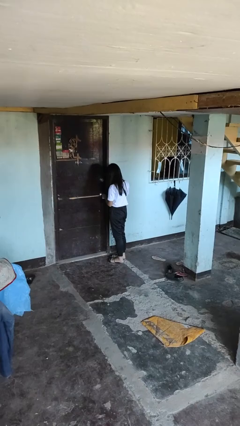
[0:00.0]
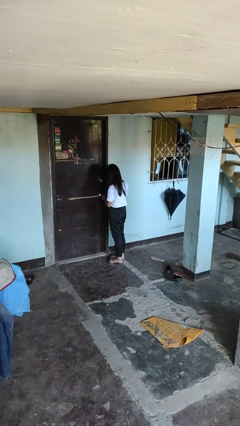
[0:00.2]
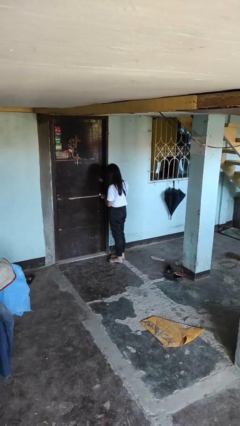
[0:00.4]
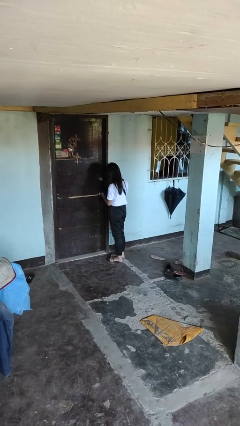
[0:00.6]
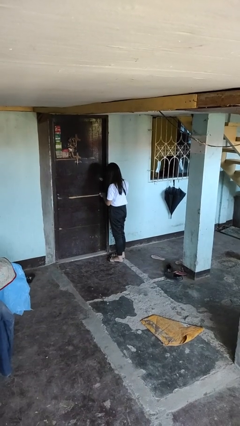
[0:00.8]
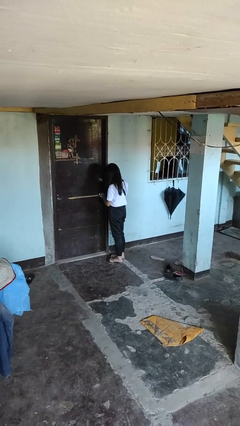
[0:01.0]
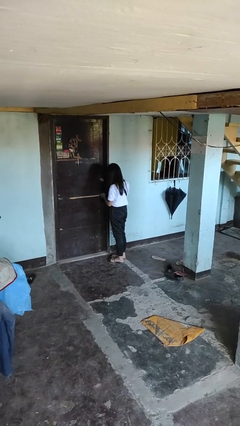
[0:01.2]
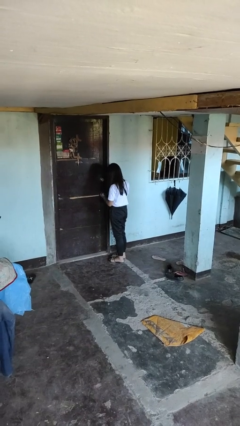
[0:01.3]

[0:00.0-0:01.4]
person locks door with keys

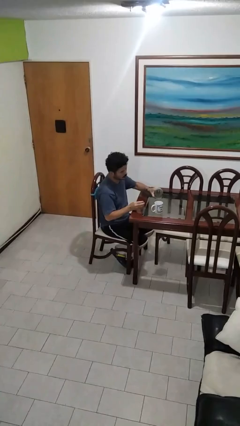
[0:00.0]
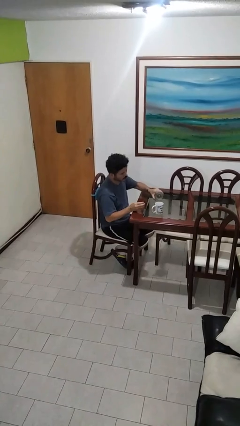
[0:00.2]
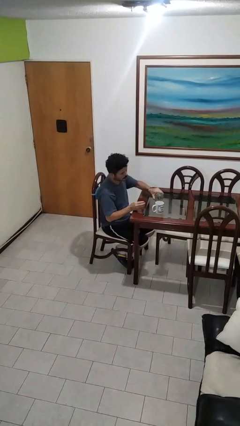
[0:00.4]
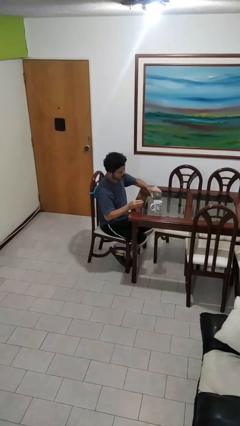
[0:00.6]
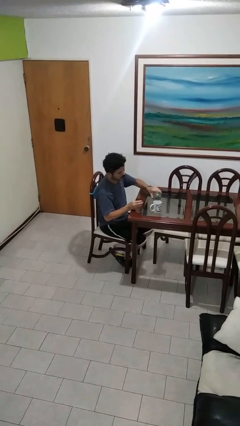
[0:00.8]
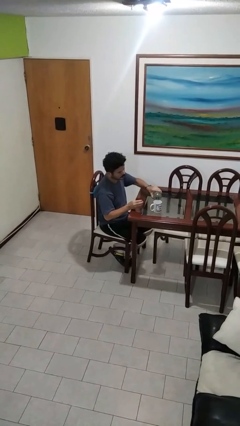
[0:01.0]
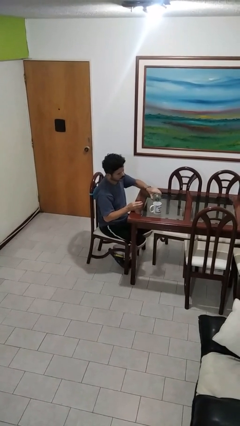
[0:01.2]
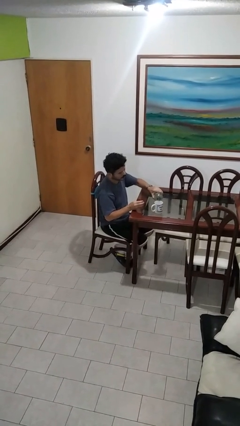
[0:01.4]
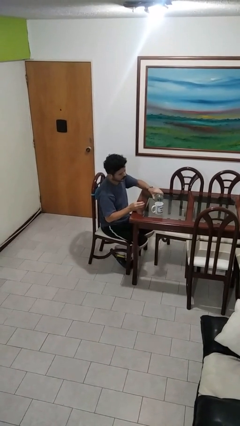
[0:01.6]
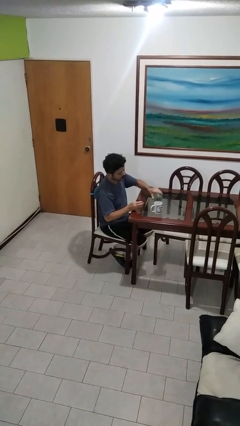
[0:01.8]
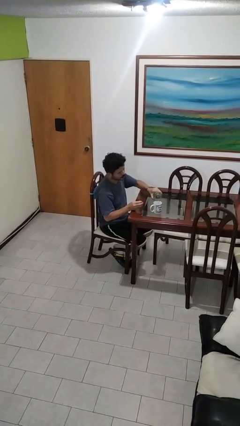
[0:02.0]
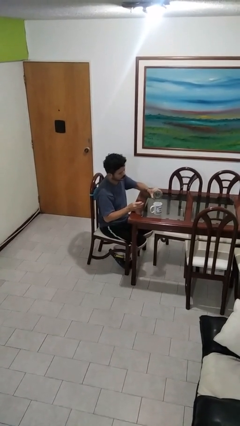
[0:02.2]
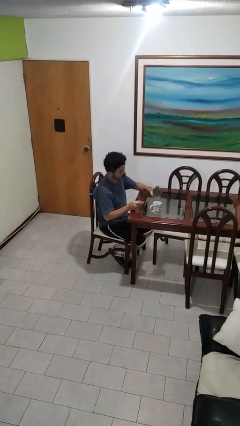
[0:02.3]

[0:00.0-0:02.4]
person pours liquid into cup

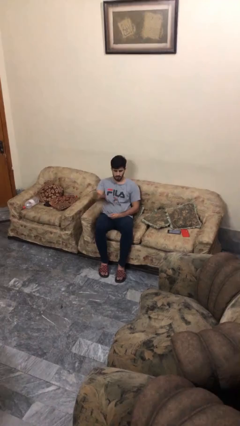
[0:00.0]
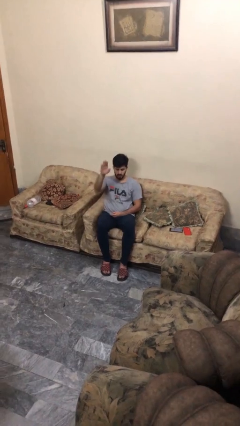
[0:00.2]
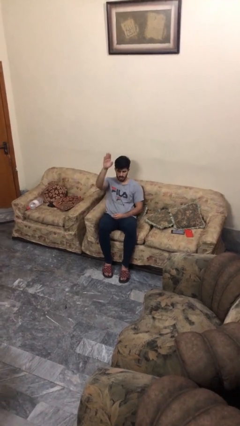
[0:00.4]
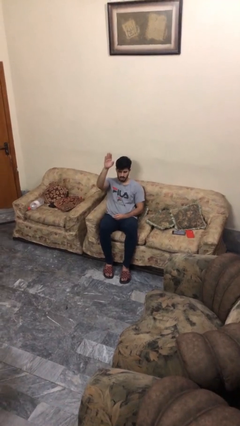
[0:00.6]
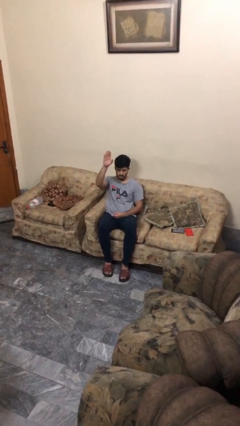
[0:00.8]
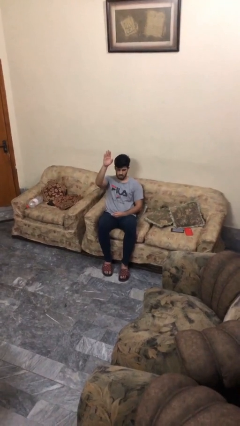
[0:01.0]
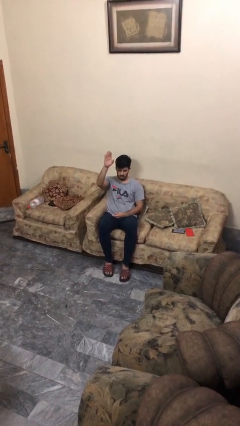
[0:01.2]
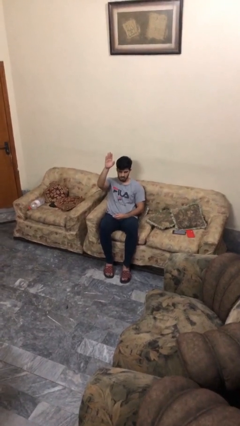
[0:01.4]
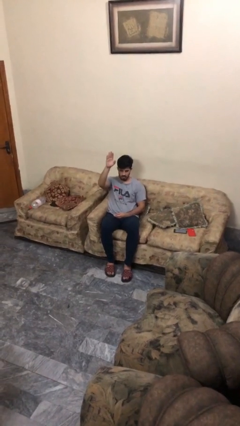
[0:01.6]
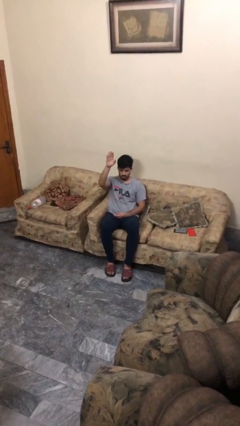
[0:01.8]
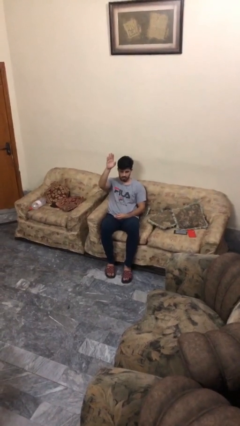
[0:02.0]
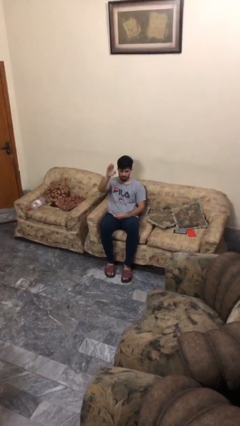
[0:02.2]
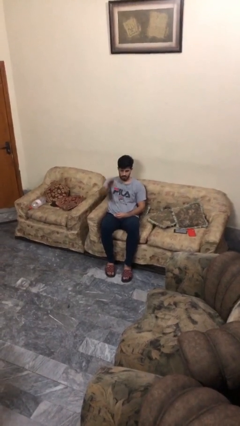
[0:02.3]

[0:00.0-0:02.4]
person gestures raise hand

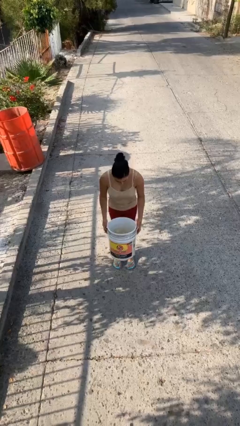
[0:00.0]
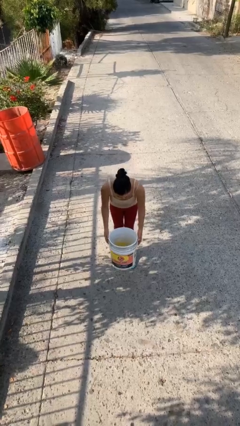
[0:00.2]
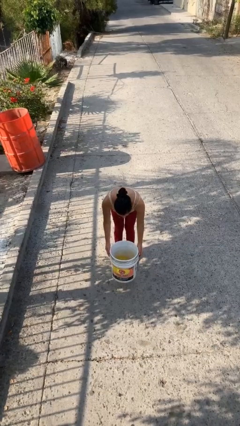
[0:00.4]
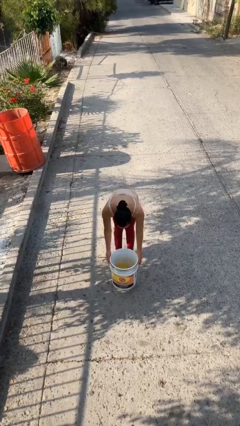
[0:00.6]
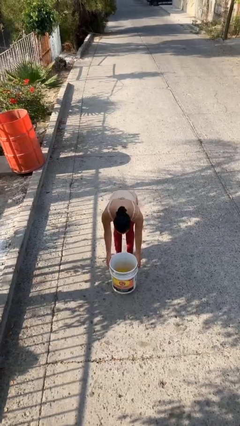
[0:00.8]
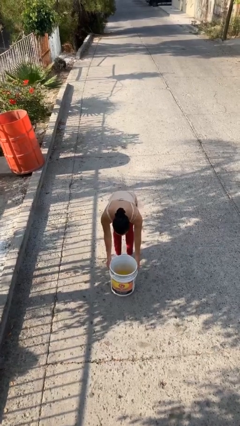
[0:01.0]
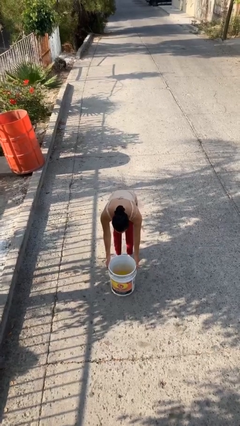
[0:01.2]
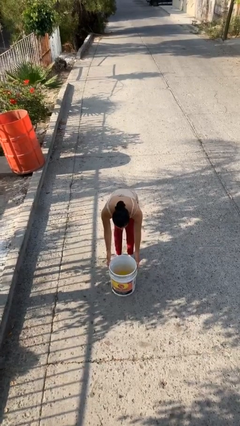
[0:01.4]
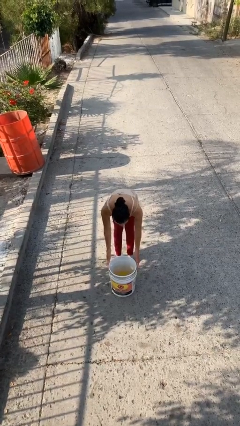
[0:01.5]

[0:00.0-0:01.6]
person puts down object on floor

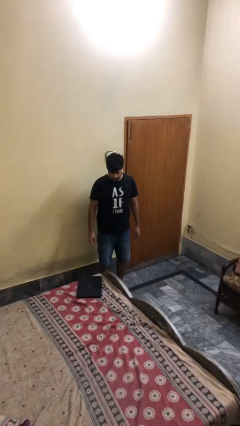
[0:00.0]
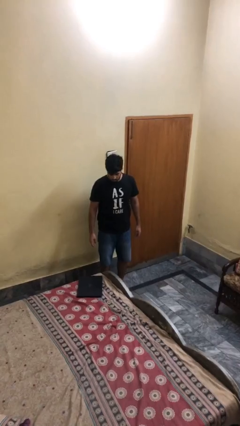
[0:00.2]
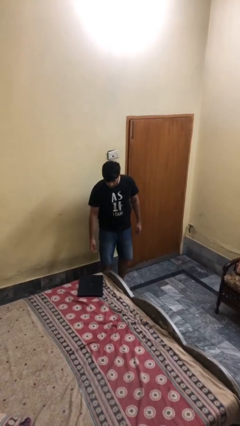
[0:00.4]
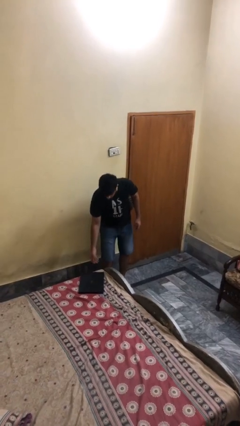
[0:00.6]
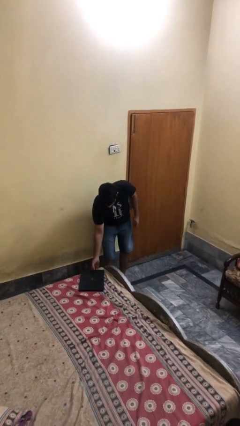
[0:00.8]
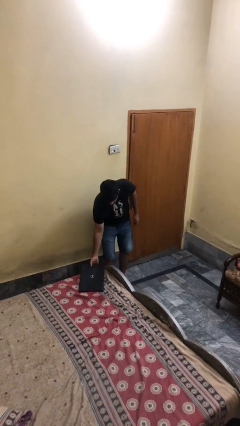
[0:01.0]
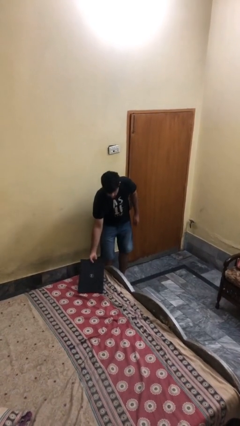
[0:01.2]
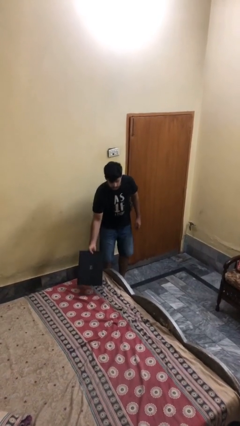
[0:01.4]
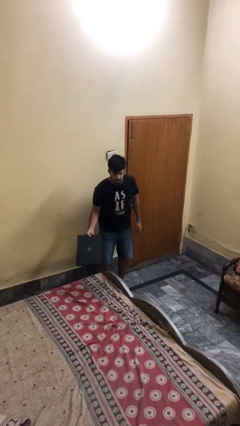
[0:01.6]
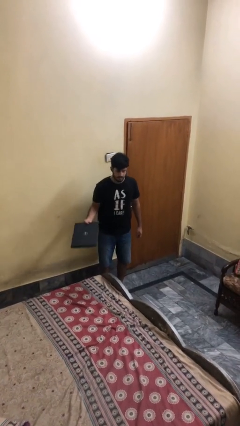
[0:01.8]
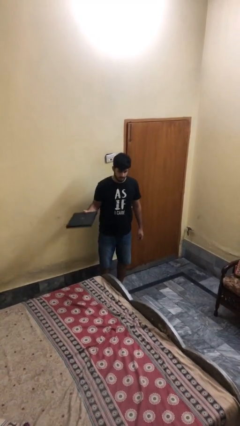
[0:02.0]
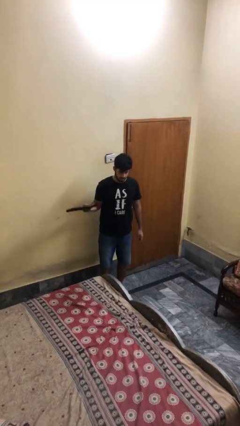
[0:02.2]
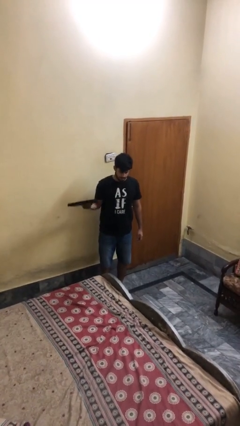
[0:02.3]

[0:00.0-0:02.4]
person picks up object from bed

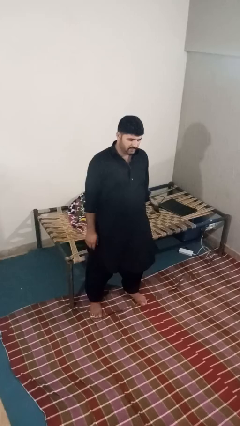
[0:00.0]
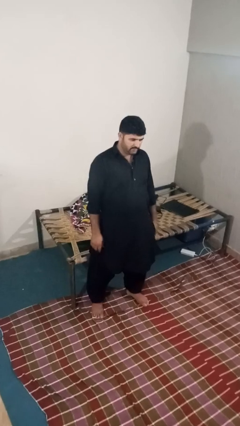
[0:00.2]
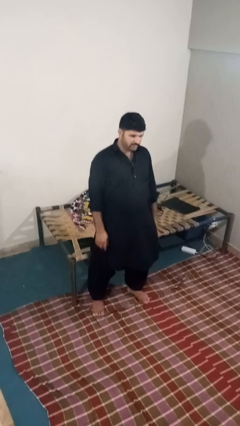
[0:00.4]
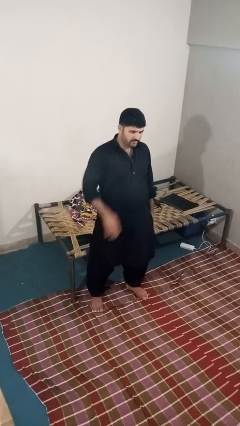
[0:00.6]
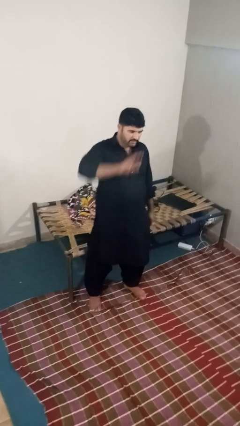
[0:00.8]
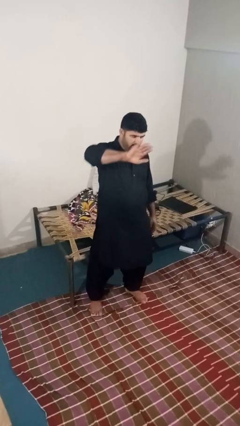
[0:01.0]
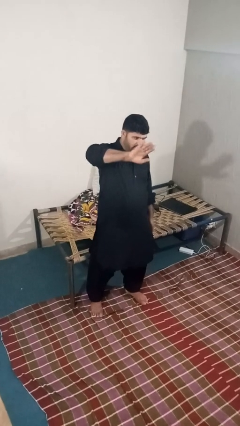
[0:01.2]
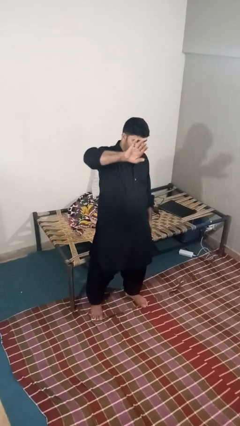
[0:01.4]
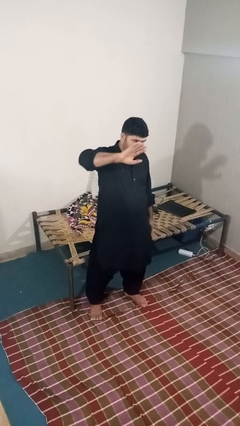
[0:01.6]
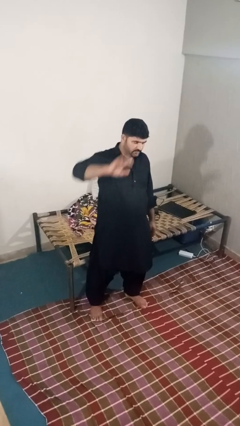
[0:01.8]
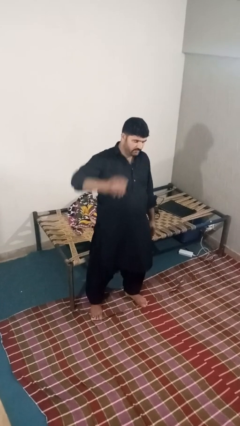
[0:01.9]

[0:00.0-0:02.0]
person gestures swipe right

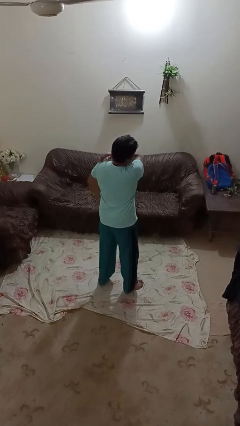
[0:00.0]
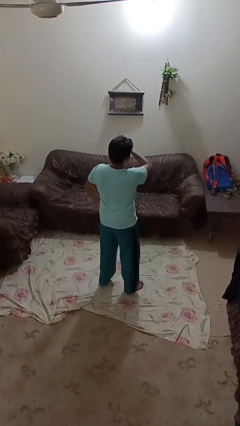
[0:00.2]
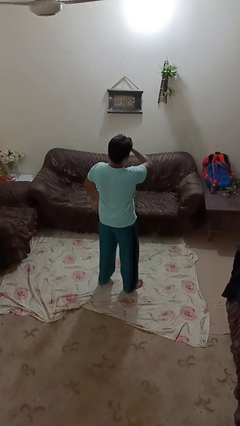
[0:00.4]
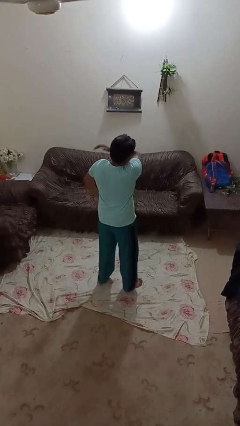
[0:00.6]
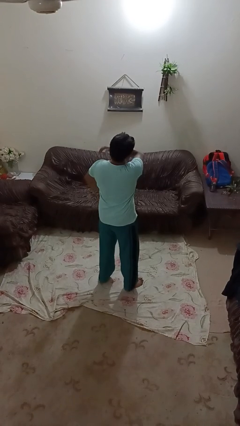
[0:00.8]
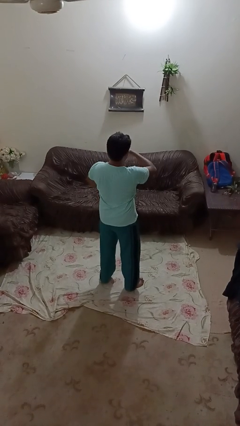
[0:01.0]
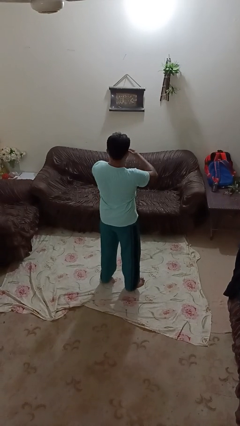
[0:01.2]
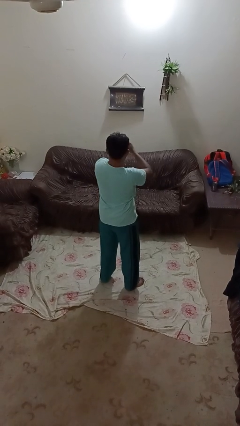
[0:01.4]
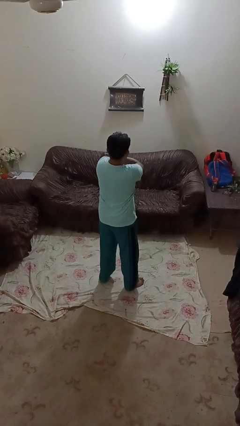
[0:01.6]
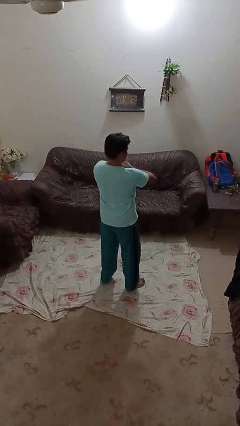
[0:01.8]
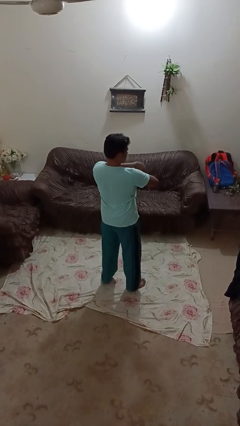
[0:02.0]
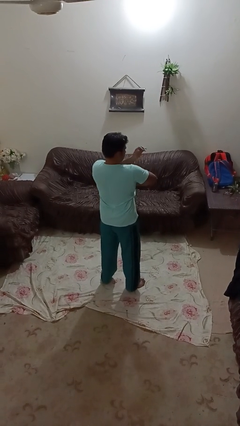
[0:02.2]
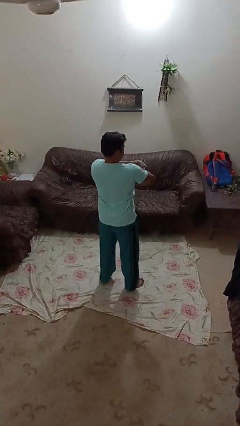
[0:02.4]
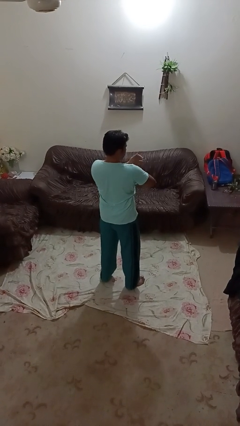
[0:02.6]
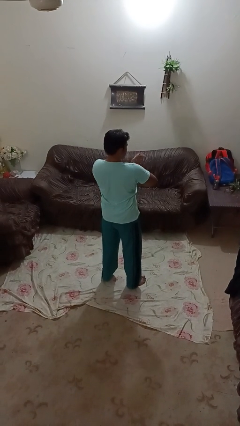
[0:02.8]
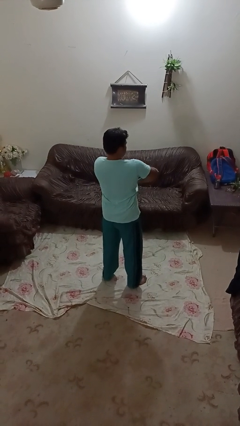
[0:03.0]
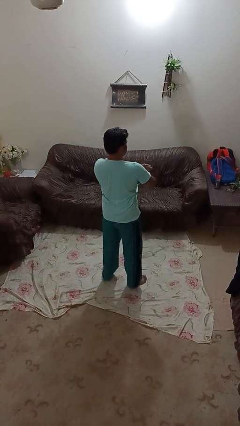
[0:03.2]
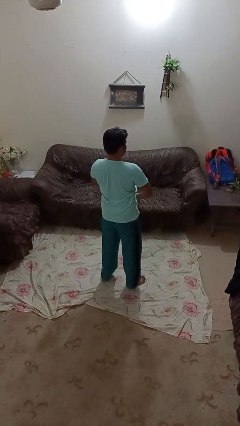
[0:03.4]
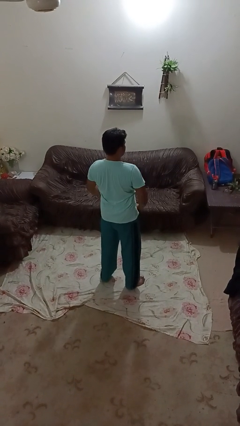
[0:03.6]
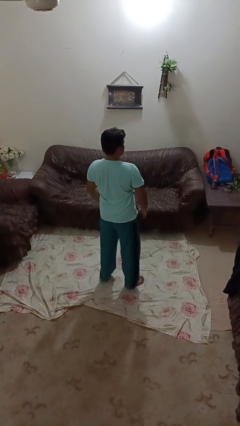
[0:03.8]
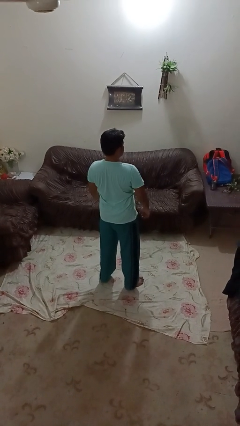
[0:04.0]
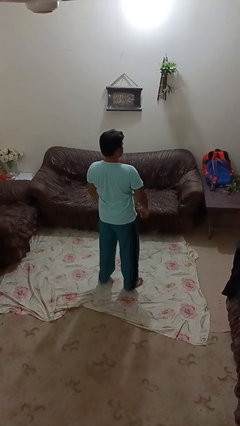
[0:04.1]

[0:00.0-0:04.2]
person swats bug

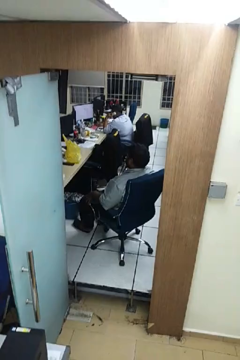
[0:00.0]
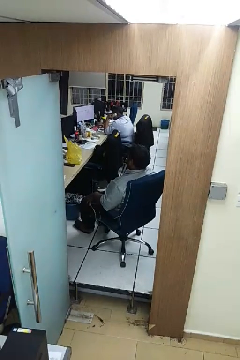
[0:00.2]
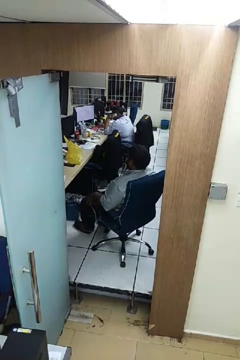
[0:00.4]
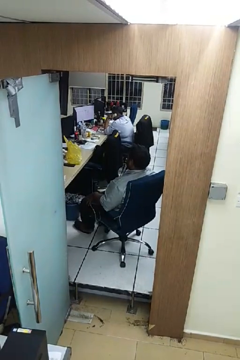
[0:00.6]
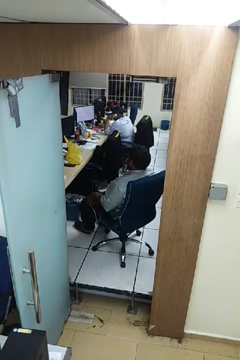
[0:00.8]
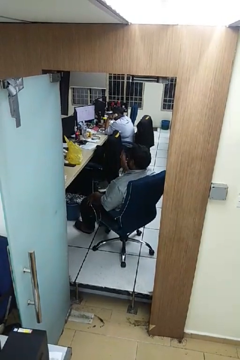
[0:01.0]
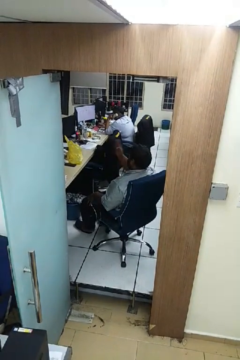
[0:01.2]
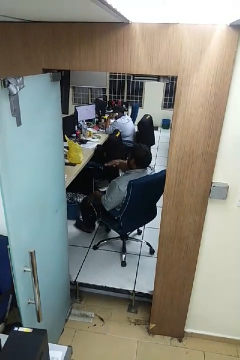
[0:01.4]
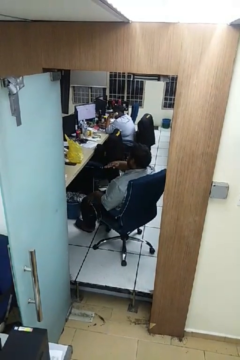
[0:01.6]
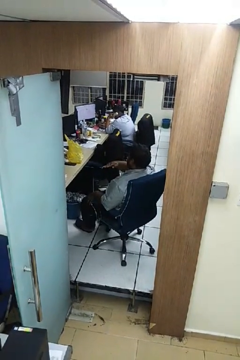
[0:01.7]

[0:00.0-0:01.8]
person gestures swipe left
